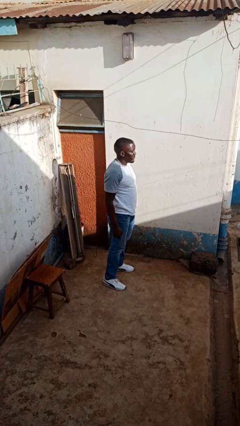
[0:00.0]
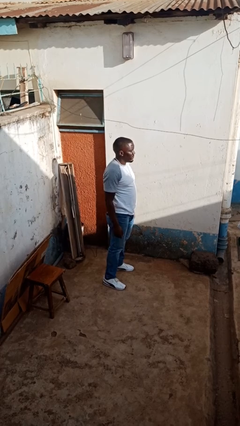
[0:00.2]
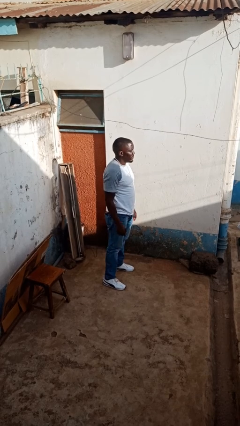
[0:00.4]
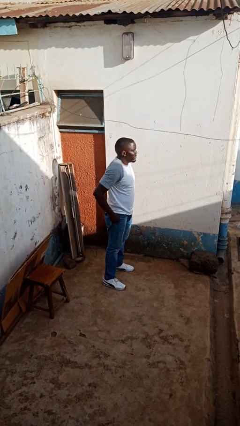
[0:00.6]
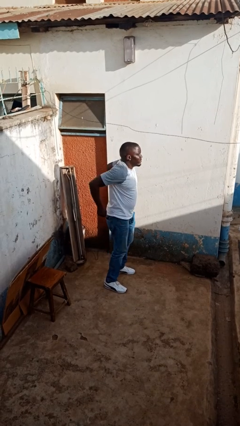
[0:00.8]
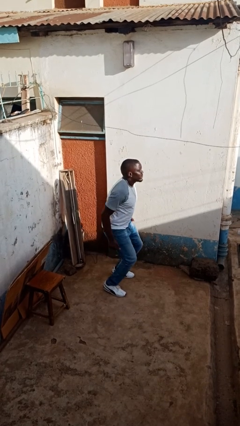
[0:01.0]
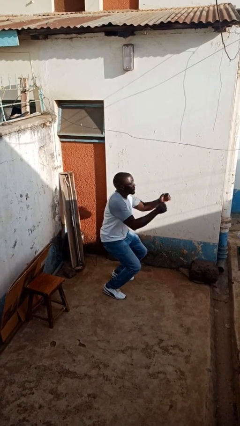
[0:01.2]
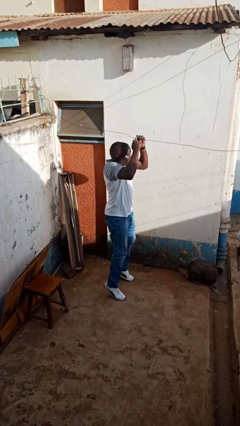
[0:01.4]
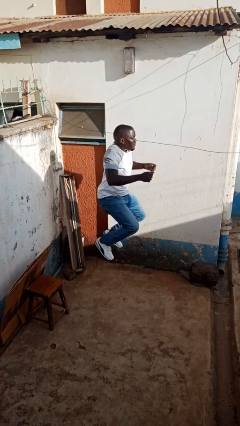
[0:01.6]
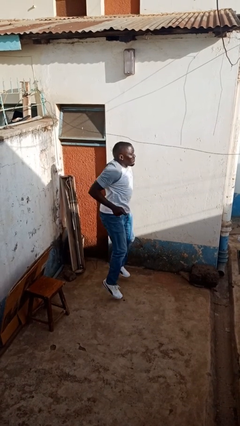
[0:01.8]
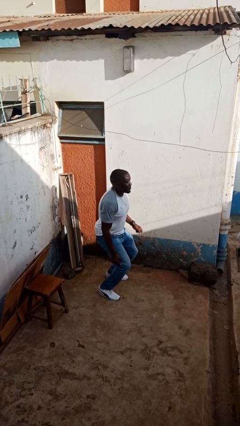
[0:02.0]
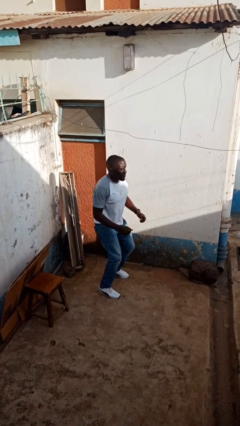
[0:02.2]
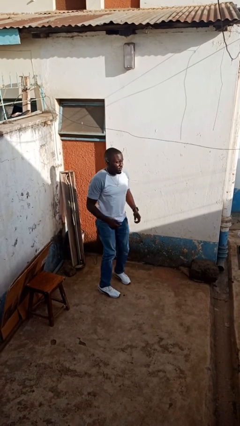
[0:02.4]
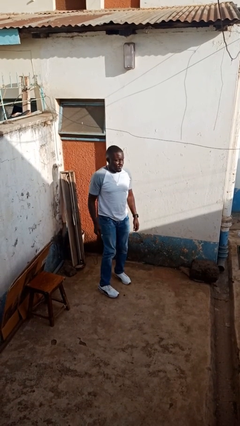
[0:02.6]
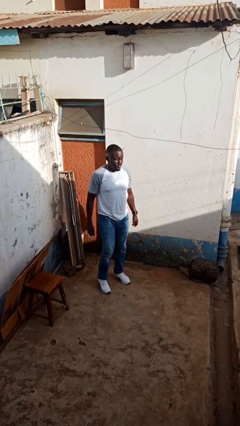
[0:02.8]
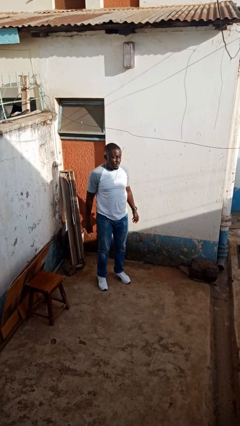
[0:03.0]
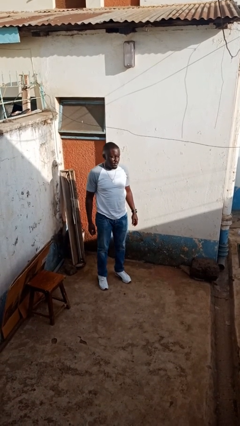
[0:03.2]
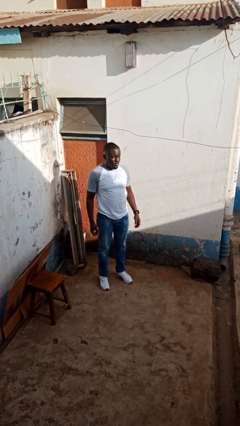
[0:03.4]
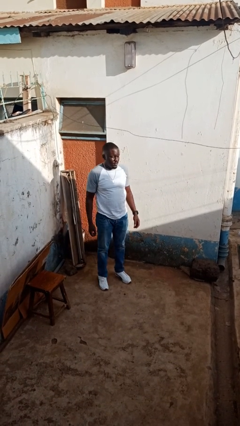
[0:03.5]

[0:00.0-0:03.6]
person jumps

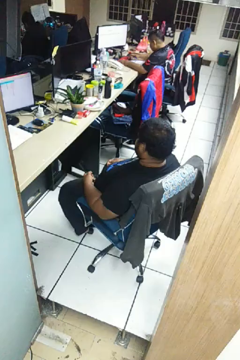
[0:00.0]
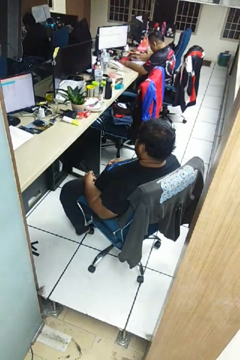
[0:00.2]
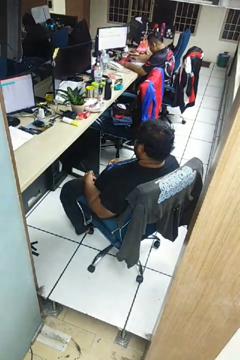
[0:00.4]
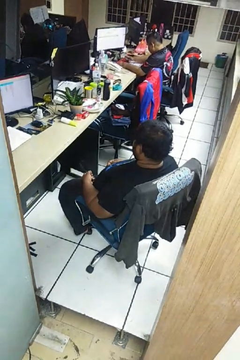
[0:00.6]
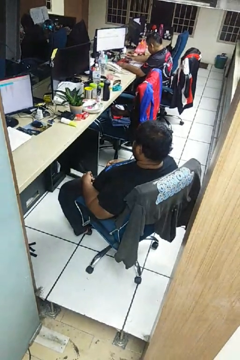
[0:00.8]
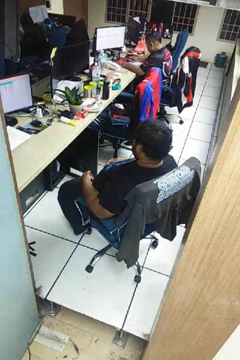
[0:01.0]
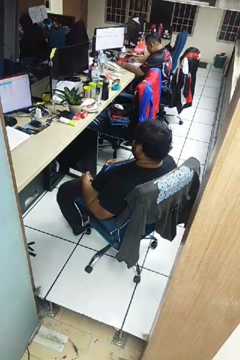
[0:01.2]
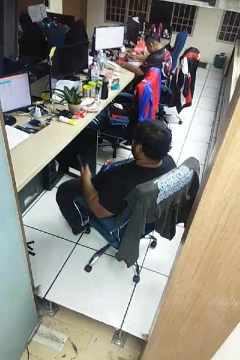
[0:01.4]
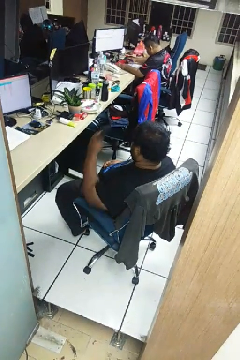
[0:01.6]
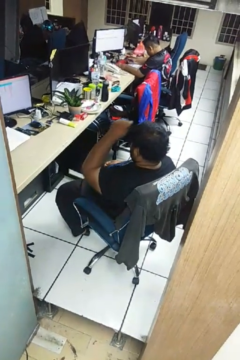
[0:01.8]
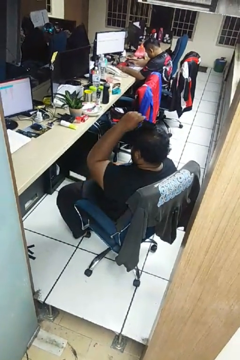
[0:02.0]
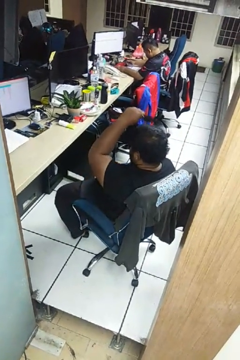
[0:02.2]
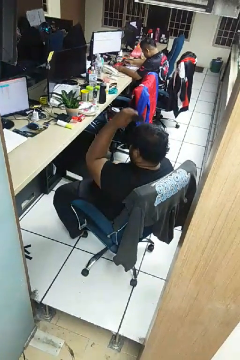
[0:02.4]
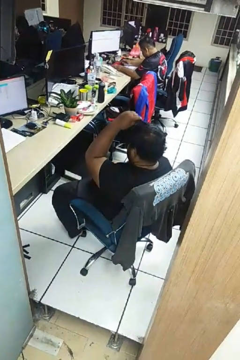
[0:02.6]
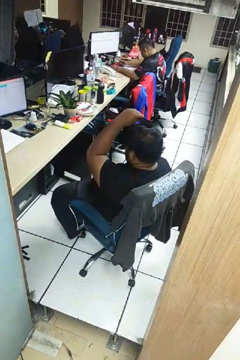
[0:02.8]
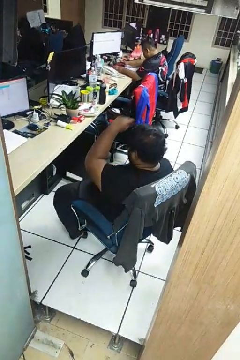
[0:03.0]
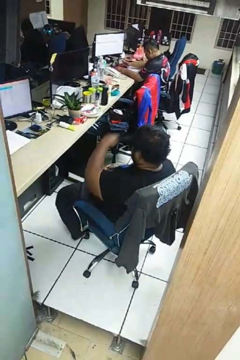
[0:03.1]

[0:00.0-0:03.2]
person brushes hair

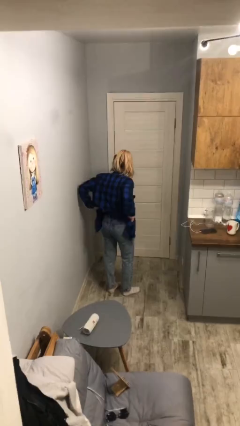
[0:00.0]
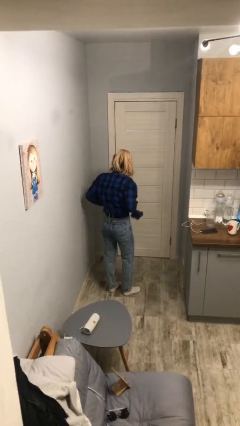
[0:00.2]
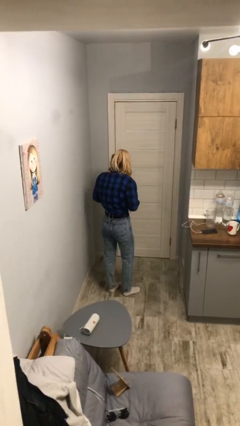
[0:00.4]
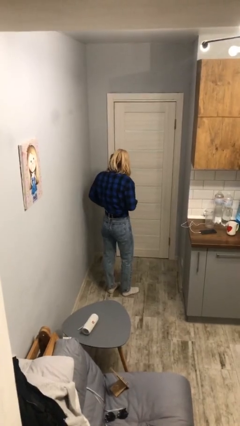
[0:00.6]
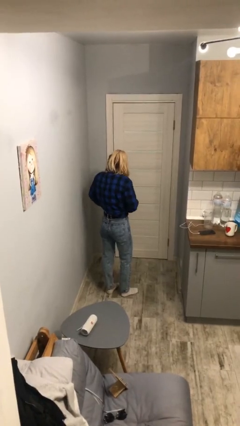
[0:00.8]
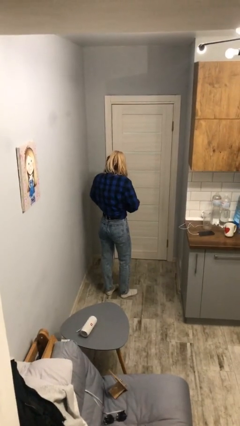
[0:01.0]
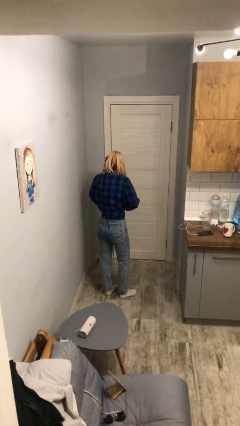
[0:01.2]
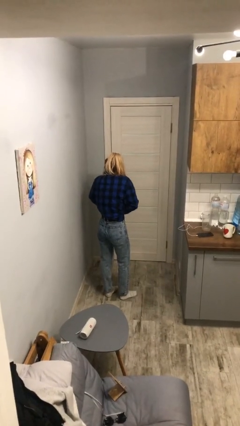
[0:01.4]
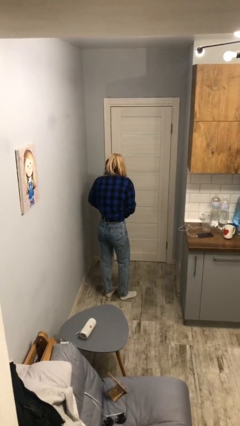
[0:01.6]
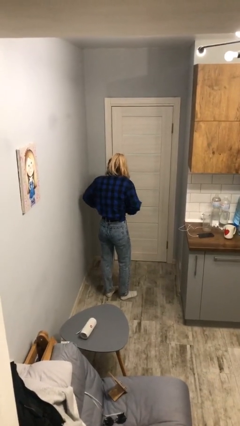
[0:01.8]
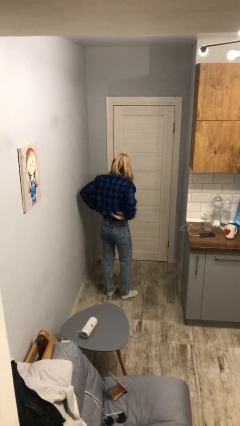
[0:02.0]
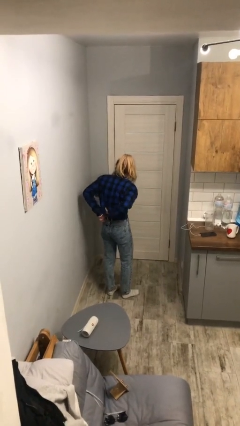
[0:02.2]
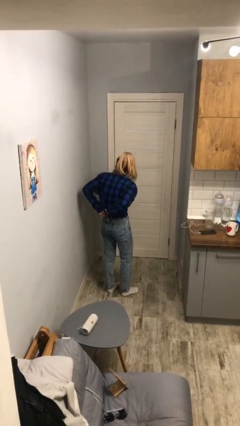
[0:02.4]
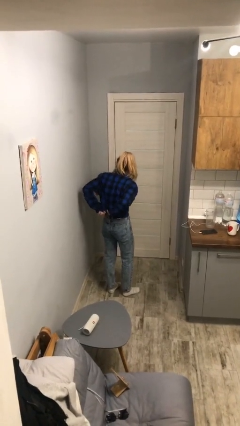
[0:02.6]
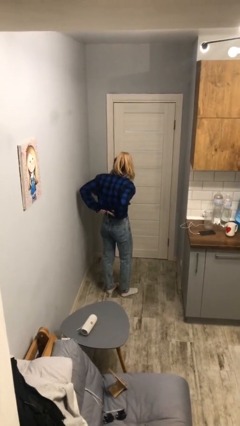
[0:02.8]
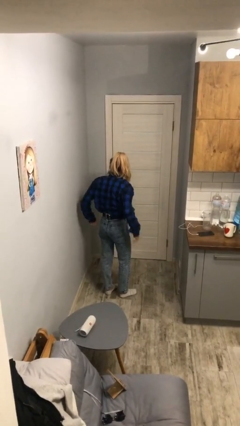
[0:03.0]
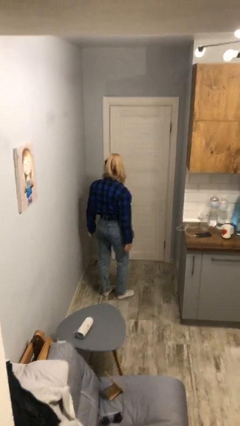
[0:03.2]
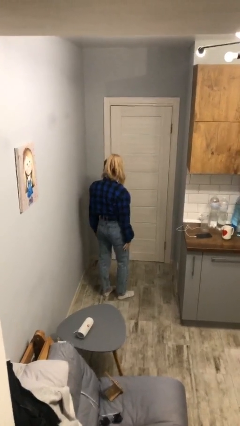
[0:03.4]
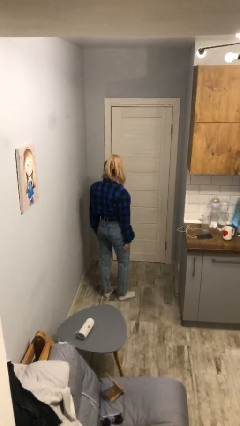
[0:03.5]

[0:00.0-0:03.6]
person tucks in shirt

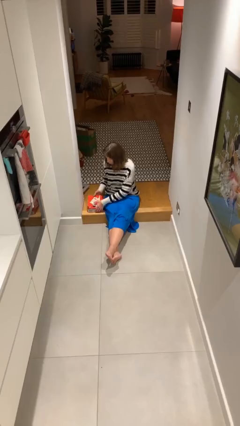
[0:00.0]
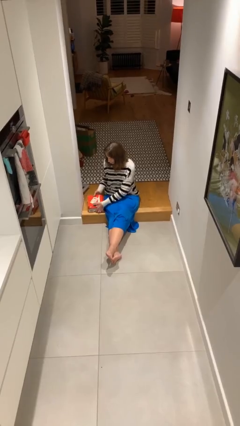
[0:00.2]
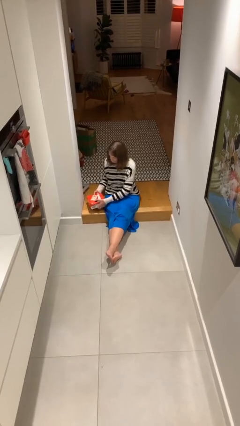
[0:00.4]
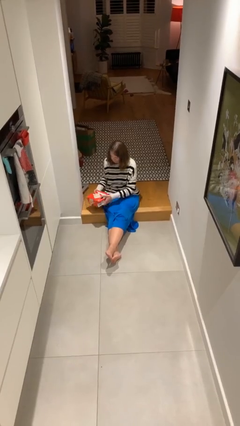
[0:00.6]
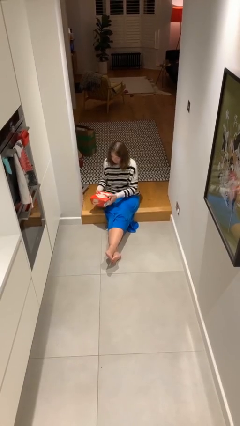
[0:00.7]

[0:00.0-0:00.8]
person picks up object from floor

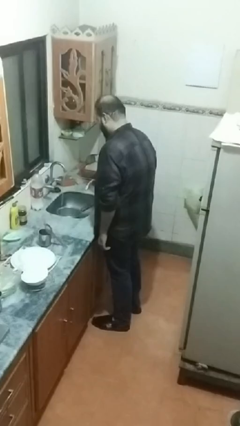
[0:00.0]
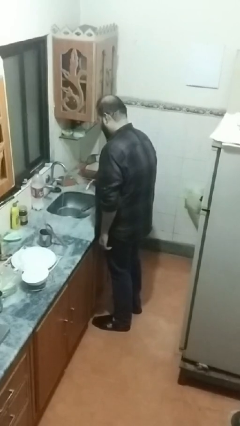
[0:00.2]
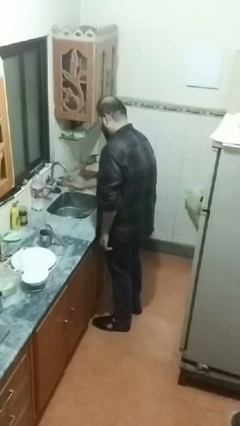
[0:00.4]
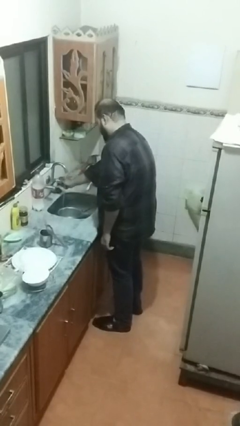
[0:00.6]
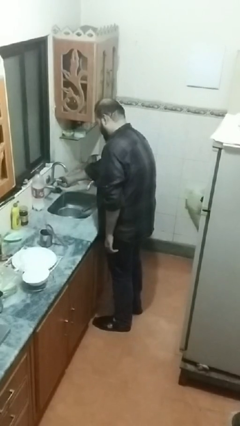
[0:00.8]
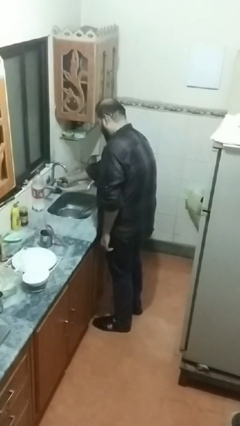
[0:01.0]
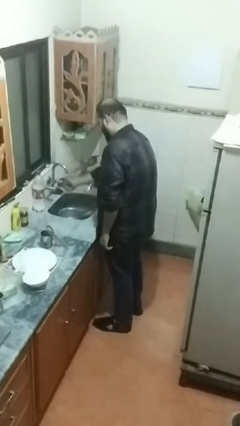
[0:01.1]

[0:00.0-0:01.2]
person turns off faucet

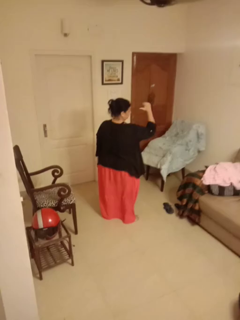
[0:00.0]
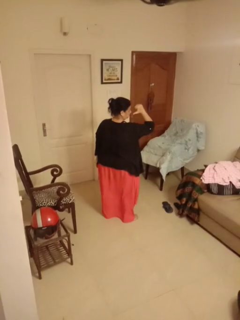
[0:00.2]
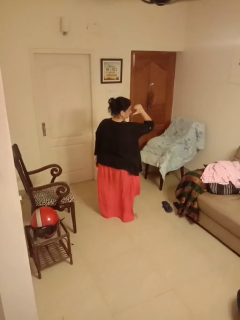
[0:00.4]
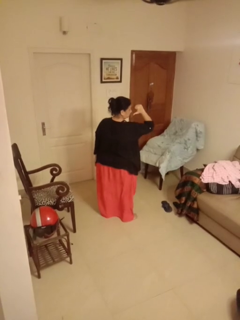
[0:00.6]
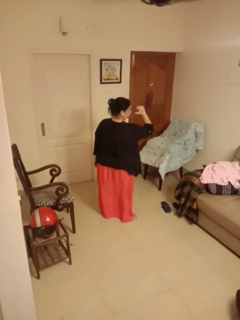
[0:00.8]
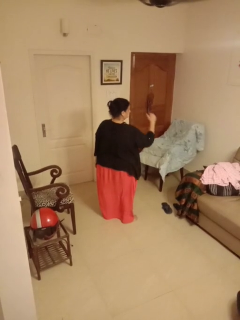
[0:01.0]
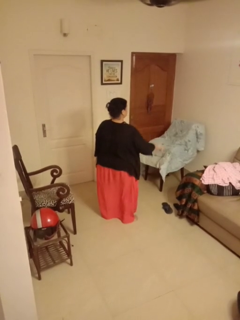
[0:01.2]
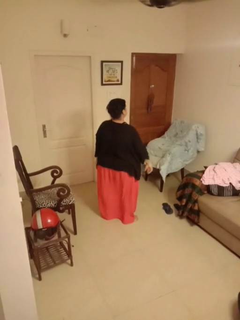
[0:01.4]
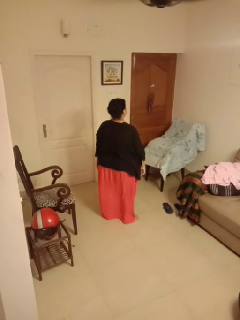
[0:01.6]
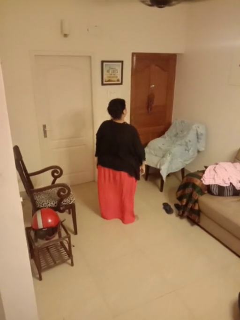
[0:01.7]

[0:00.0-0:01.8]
person gestures behind me

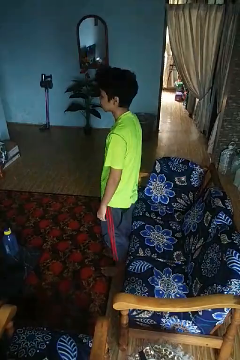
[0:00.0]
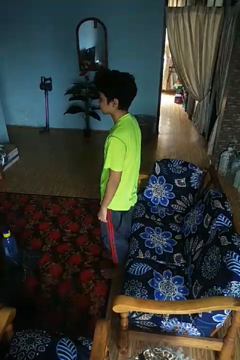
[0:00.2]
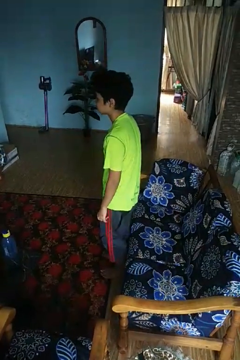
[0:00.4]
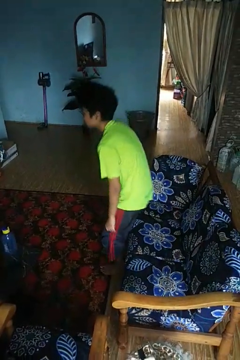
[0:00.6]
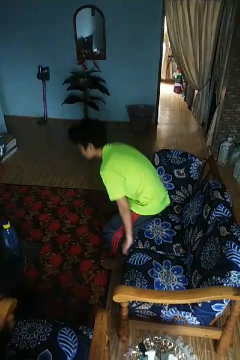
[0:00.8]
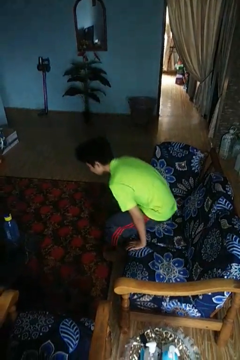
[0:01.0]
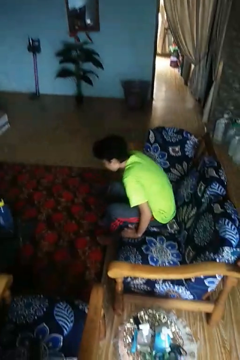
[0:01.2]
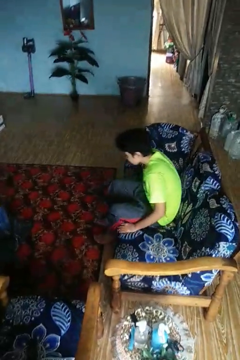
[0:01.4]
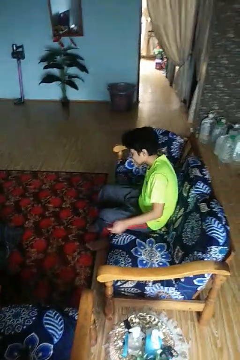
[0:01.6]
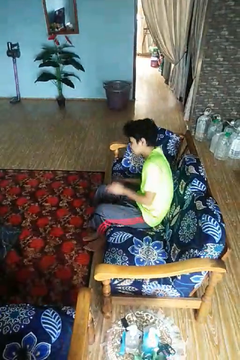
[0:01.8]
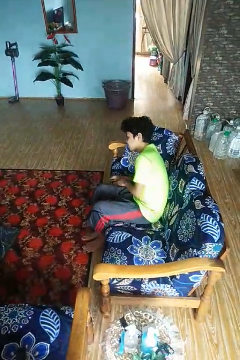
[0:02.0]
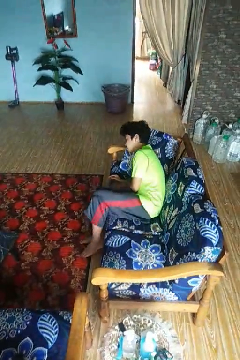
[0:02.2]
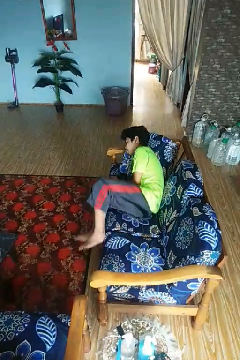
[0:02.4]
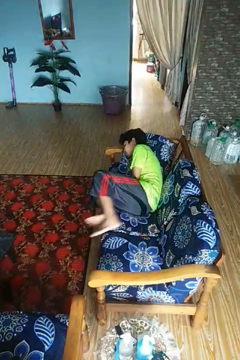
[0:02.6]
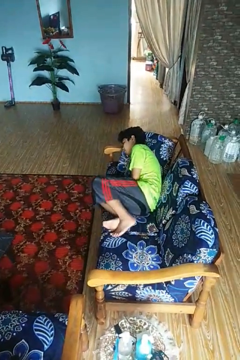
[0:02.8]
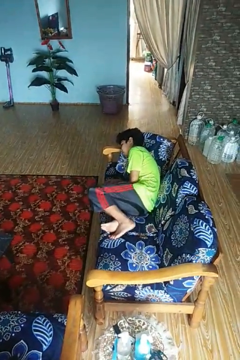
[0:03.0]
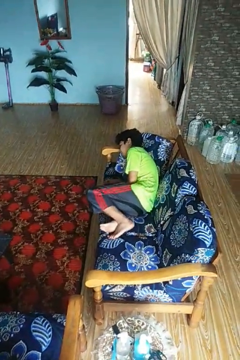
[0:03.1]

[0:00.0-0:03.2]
person lies down on couch

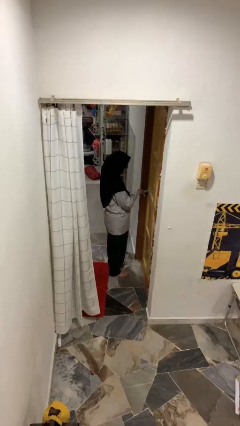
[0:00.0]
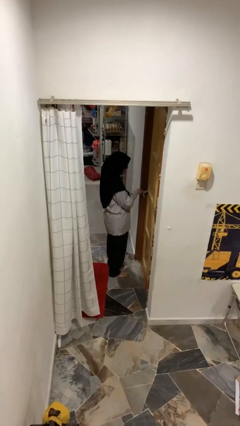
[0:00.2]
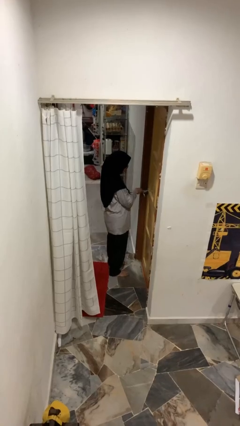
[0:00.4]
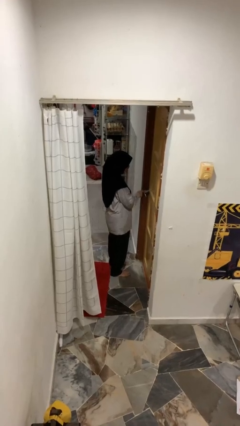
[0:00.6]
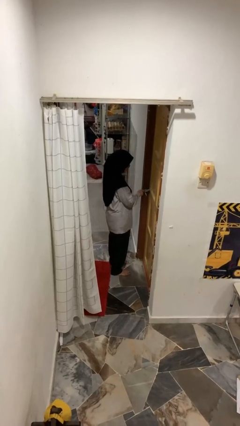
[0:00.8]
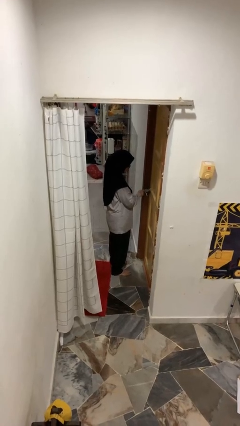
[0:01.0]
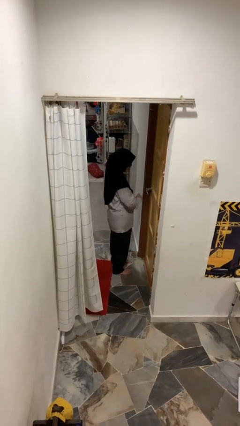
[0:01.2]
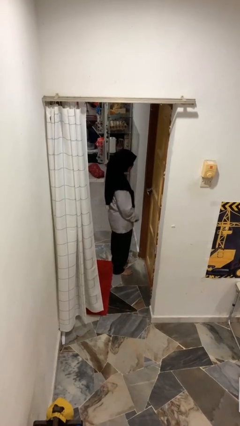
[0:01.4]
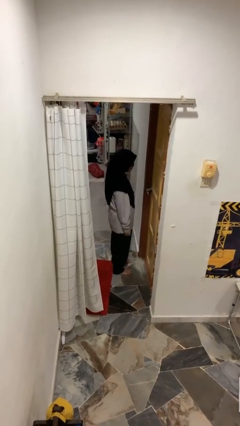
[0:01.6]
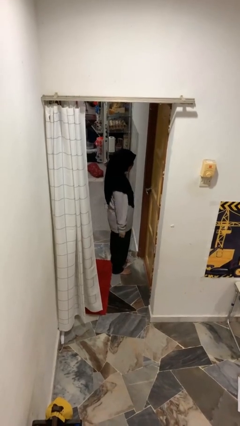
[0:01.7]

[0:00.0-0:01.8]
person locks door with keys
